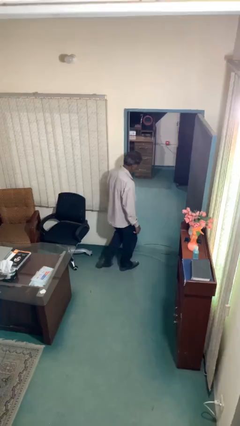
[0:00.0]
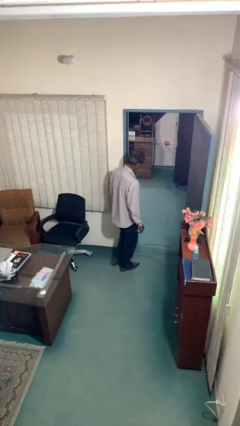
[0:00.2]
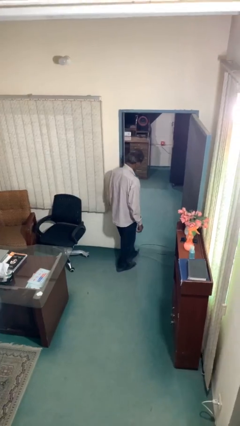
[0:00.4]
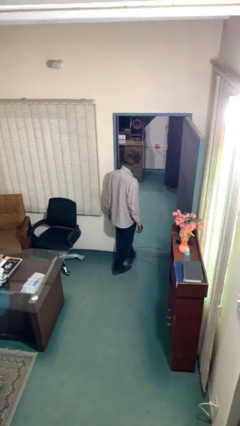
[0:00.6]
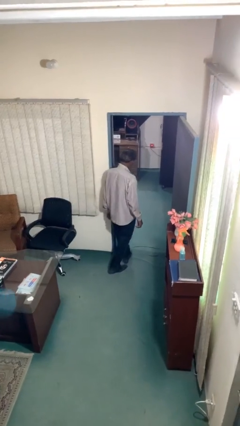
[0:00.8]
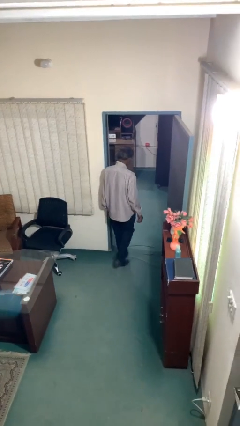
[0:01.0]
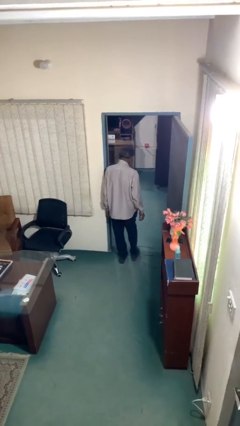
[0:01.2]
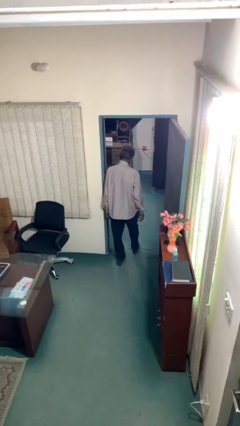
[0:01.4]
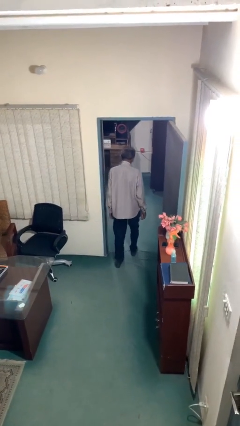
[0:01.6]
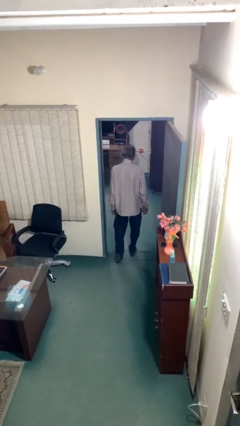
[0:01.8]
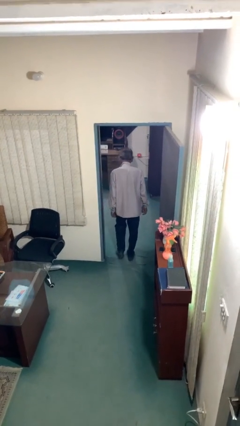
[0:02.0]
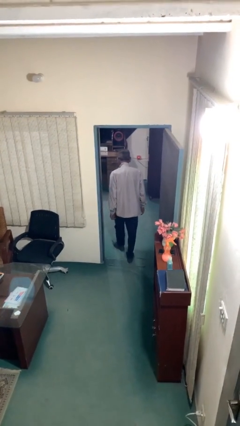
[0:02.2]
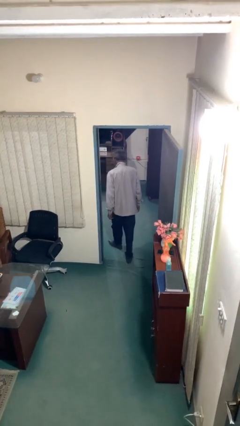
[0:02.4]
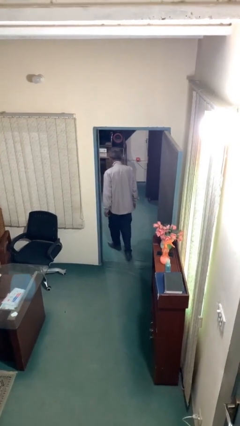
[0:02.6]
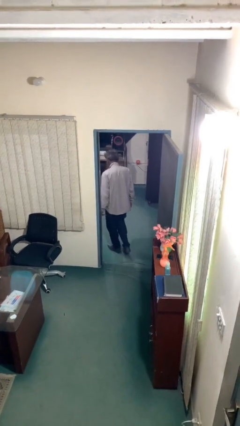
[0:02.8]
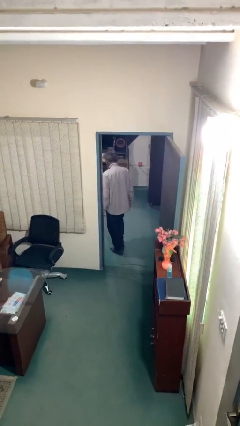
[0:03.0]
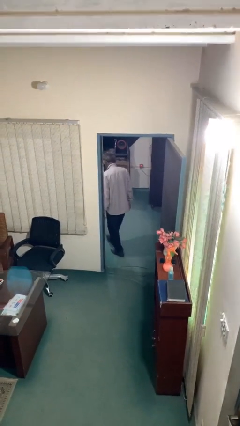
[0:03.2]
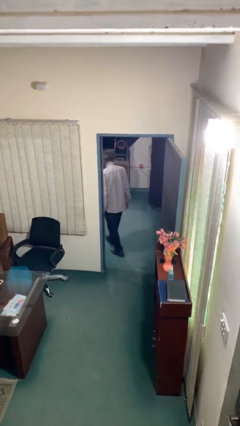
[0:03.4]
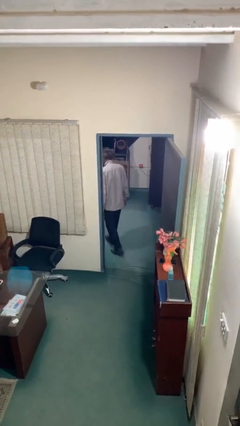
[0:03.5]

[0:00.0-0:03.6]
person exits scene through structure

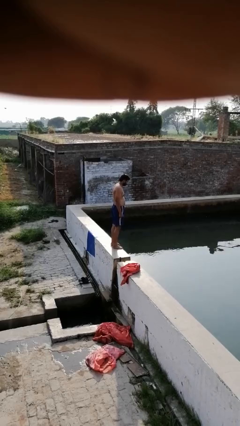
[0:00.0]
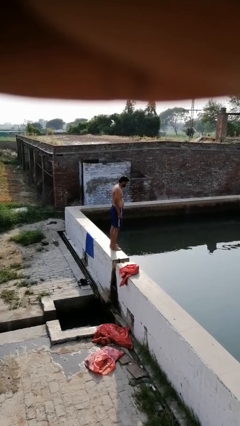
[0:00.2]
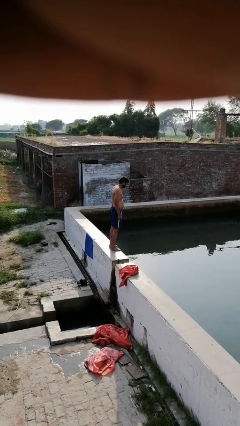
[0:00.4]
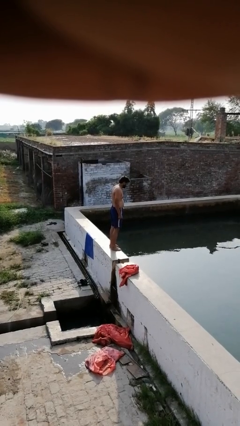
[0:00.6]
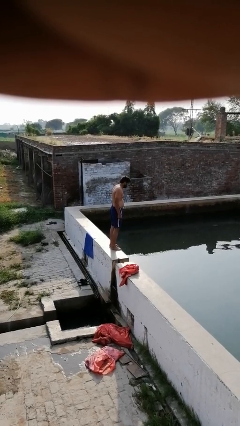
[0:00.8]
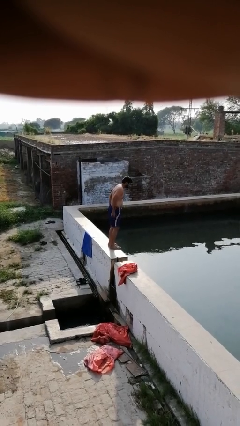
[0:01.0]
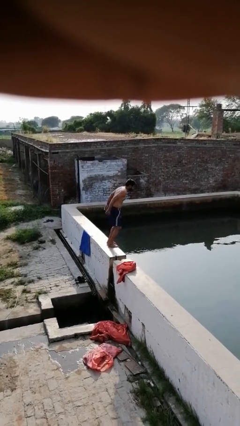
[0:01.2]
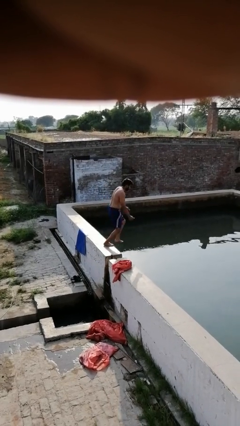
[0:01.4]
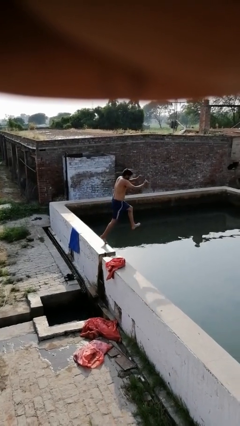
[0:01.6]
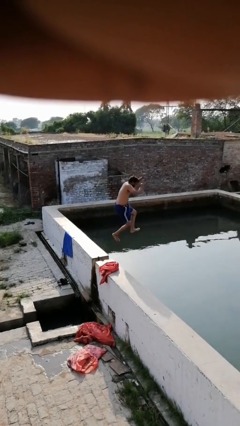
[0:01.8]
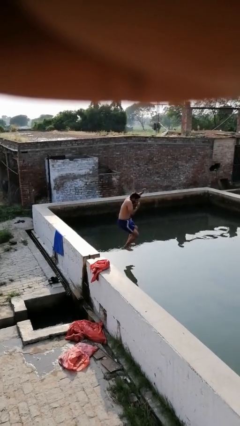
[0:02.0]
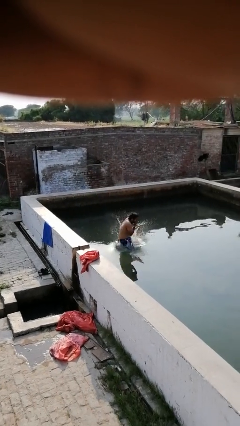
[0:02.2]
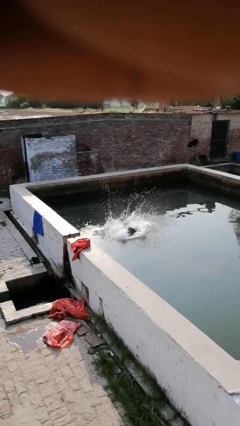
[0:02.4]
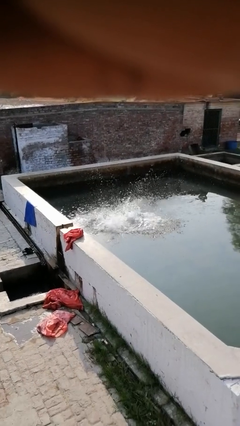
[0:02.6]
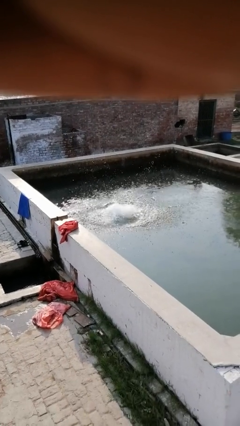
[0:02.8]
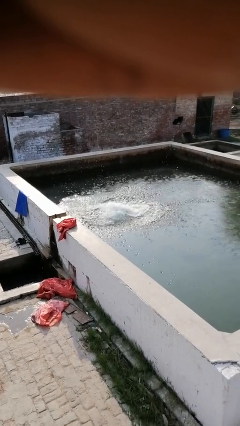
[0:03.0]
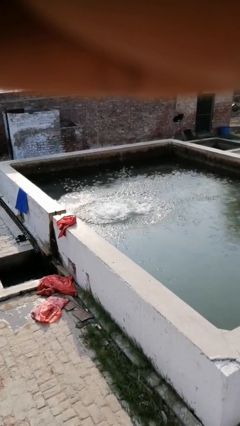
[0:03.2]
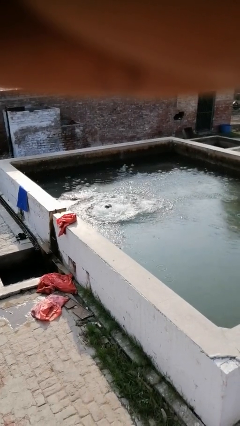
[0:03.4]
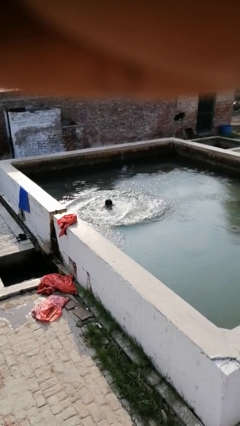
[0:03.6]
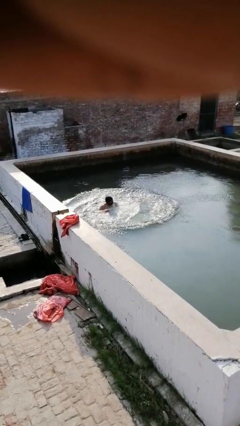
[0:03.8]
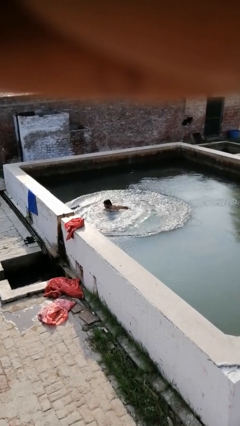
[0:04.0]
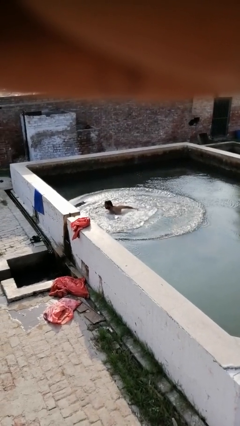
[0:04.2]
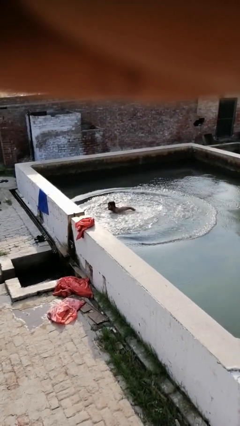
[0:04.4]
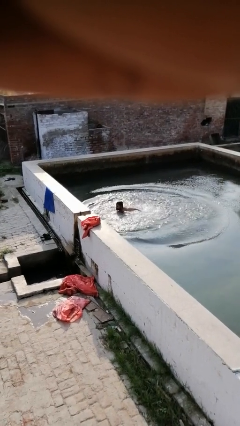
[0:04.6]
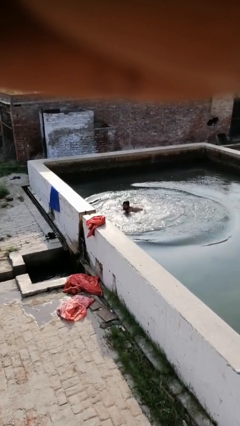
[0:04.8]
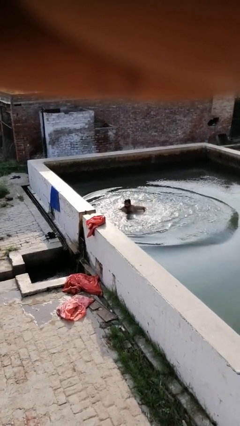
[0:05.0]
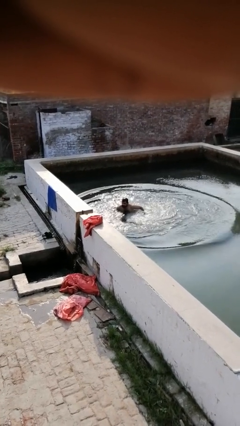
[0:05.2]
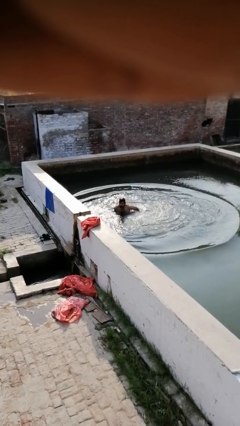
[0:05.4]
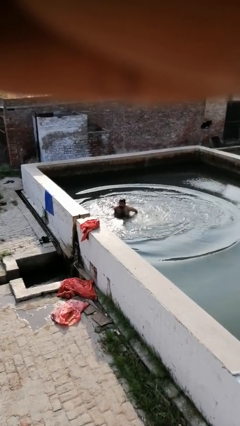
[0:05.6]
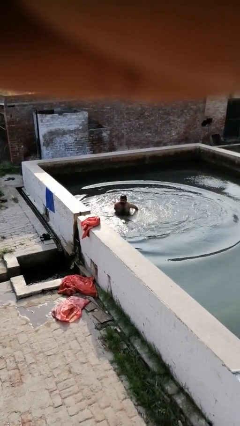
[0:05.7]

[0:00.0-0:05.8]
person jumps into pool

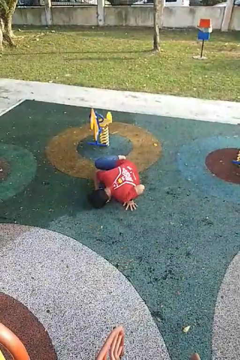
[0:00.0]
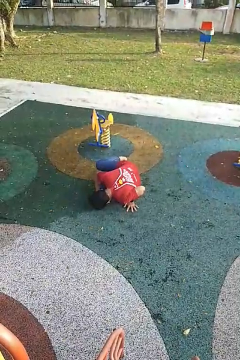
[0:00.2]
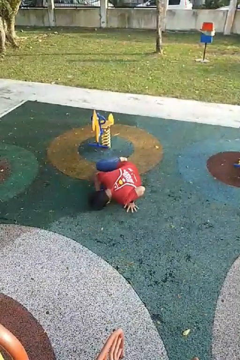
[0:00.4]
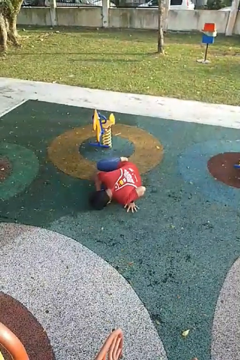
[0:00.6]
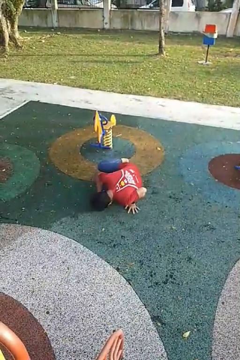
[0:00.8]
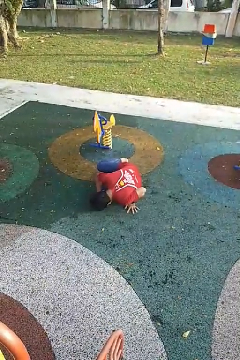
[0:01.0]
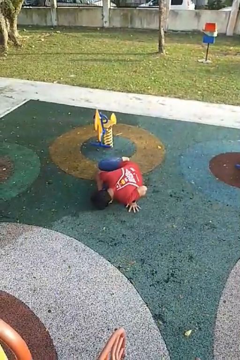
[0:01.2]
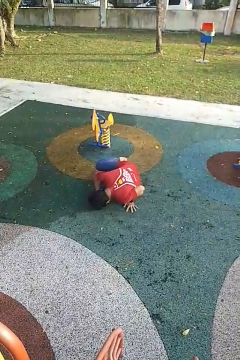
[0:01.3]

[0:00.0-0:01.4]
person lies down on floor

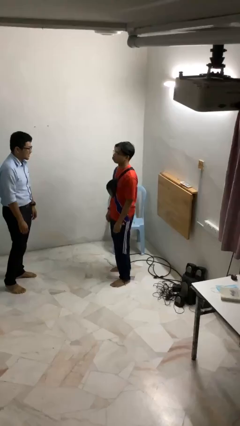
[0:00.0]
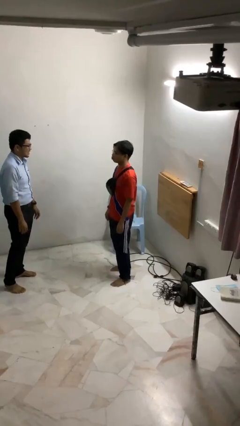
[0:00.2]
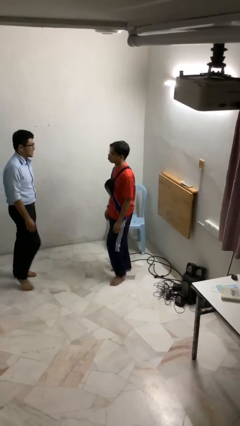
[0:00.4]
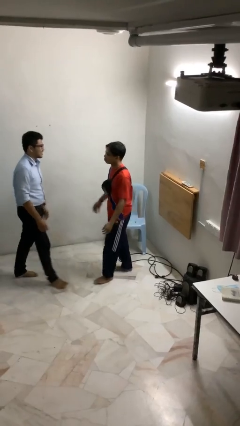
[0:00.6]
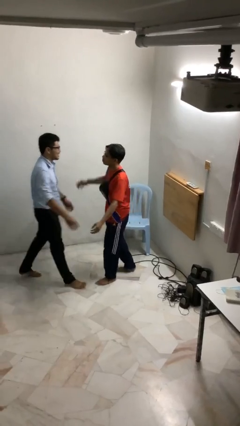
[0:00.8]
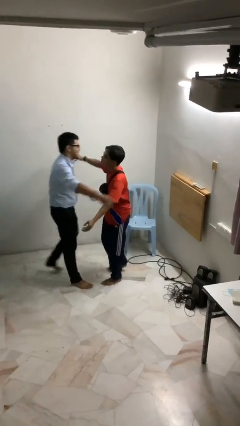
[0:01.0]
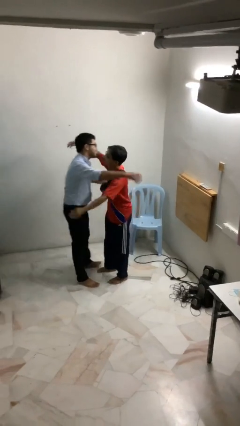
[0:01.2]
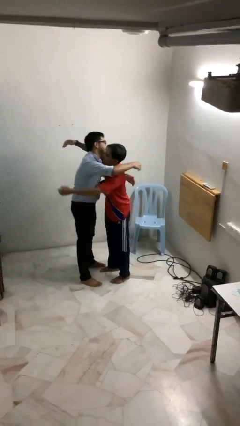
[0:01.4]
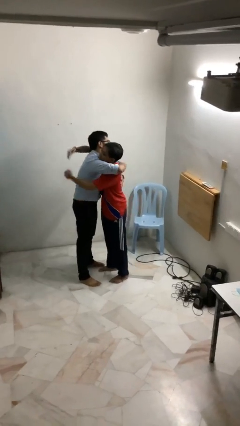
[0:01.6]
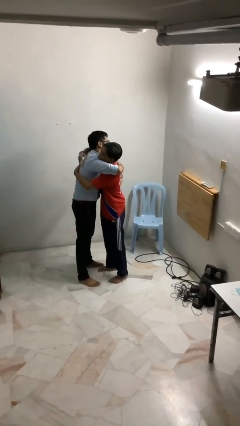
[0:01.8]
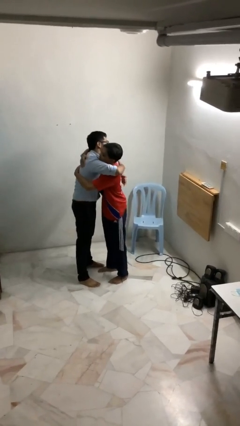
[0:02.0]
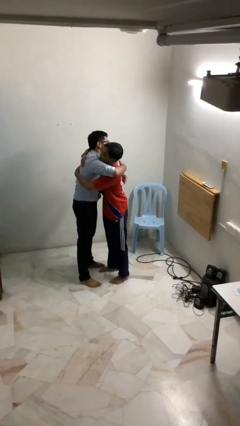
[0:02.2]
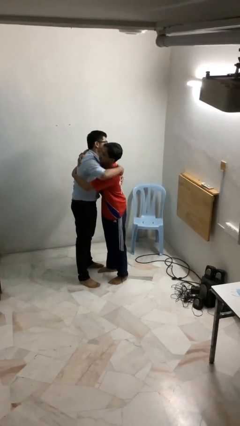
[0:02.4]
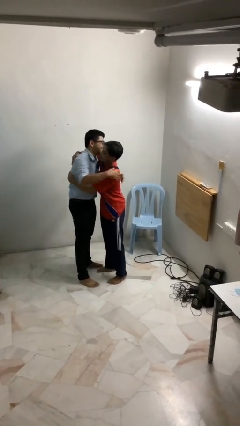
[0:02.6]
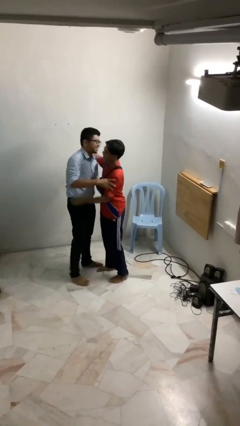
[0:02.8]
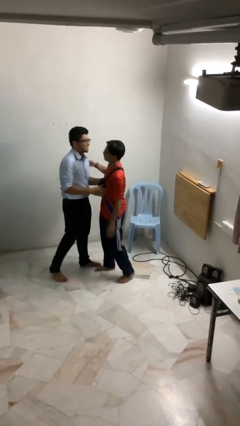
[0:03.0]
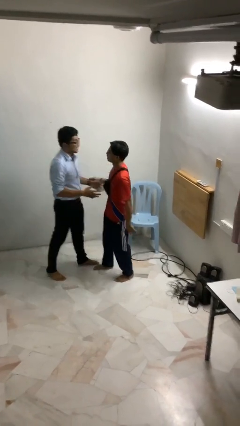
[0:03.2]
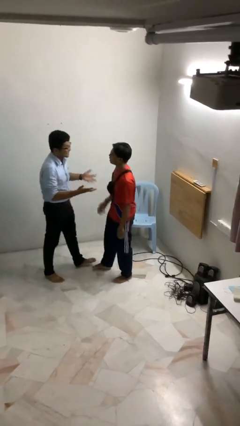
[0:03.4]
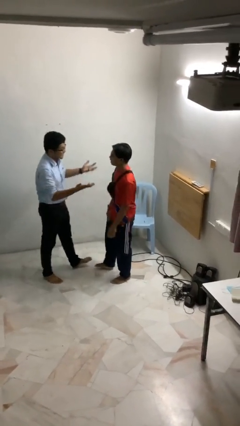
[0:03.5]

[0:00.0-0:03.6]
person embraces person

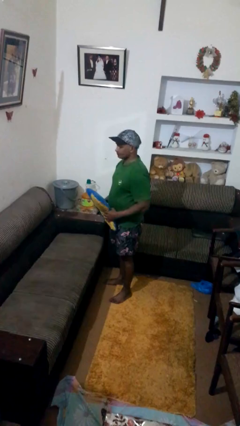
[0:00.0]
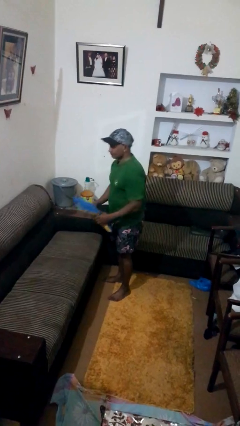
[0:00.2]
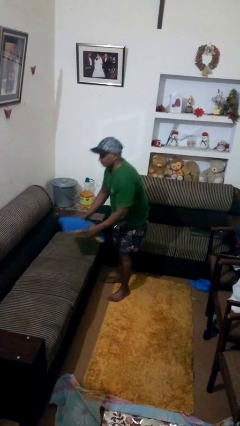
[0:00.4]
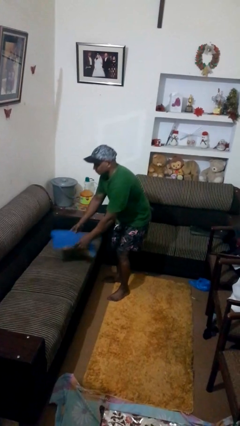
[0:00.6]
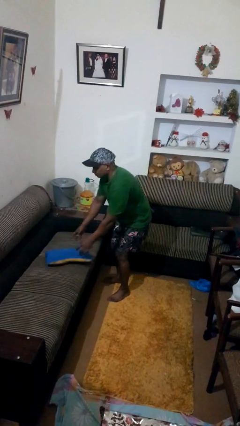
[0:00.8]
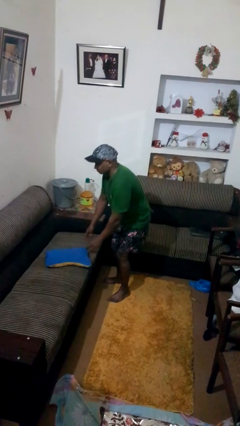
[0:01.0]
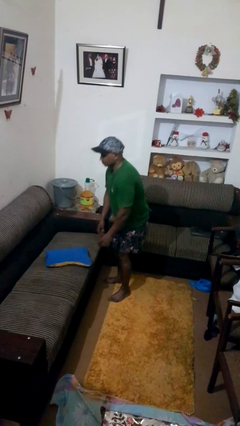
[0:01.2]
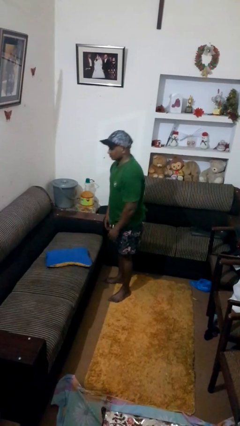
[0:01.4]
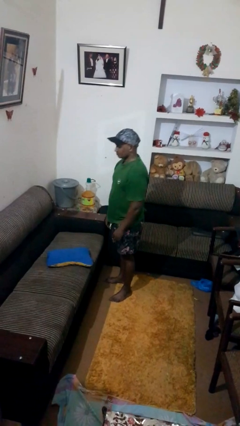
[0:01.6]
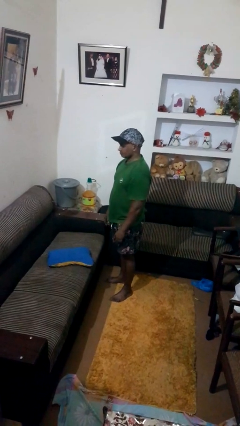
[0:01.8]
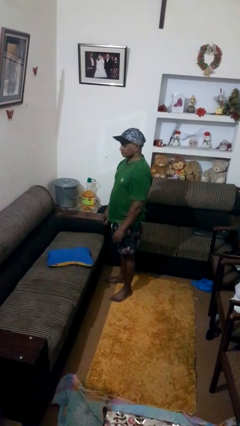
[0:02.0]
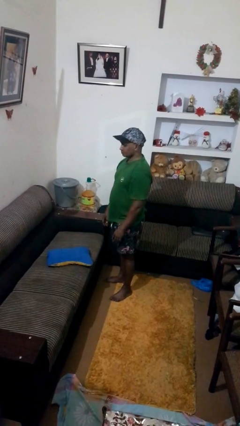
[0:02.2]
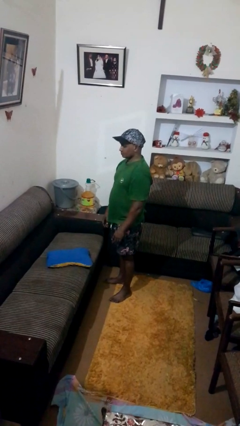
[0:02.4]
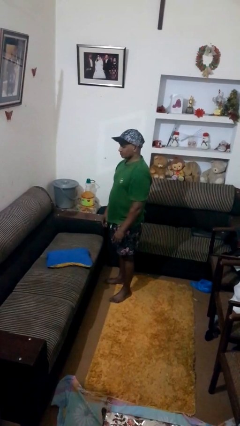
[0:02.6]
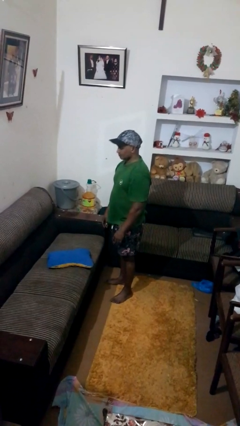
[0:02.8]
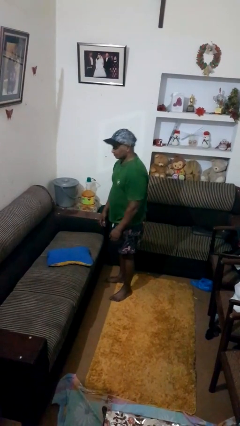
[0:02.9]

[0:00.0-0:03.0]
person puts down object on couch

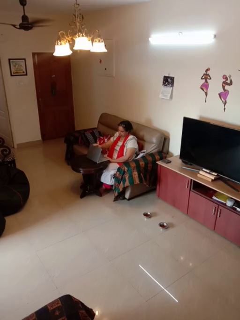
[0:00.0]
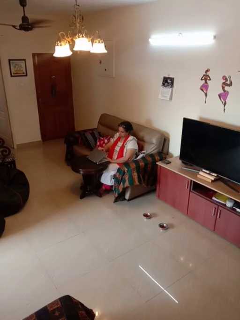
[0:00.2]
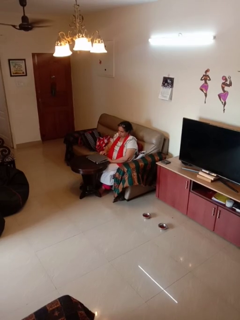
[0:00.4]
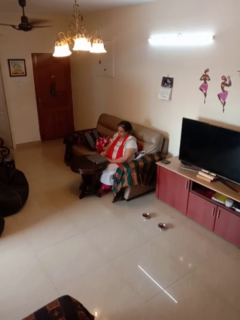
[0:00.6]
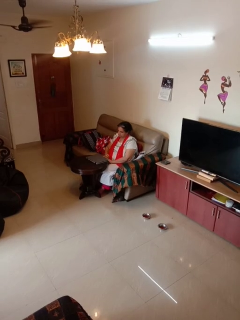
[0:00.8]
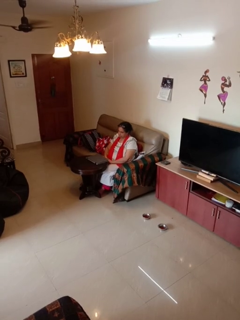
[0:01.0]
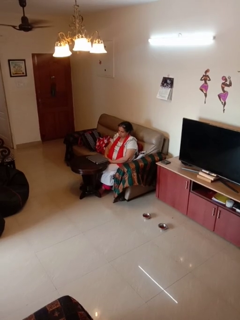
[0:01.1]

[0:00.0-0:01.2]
person closes laptop
